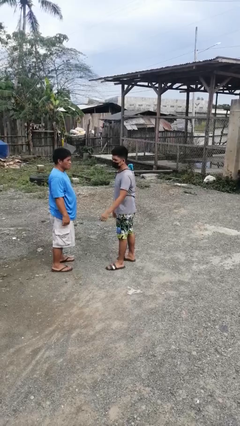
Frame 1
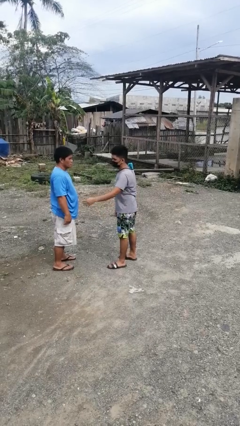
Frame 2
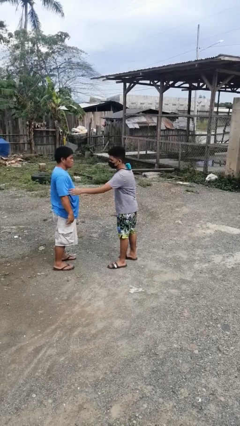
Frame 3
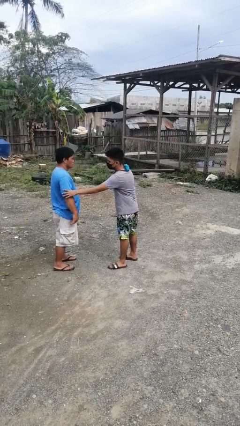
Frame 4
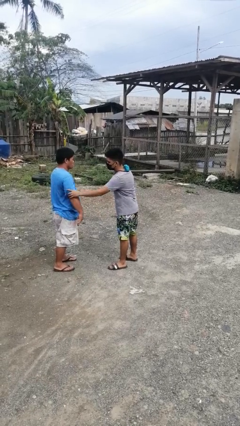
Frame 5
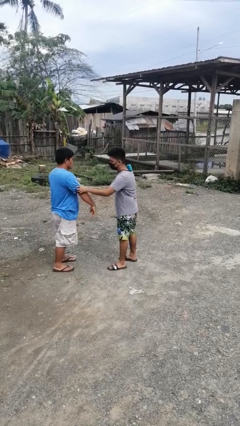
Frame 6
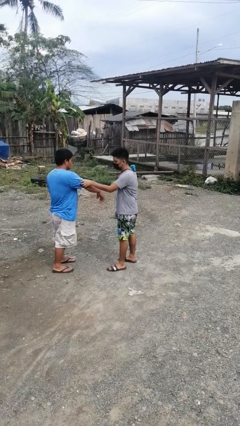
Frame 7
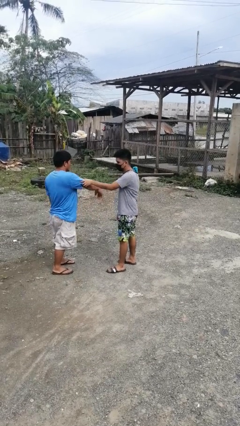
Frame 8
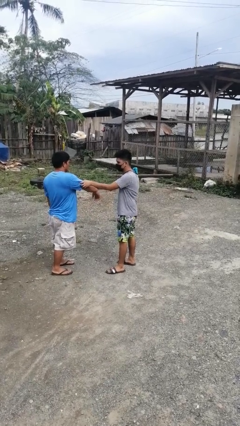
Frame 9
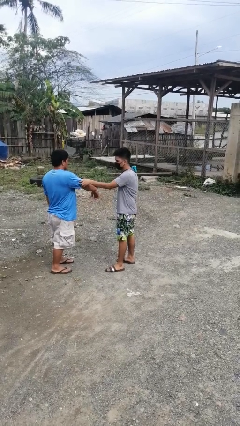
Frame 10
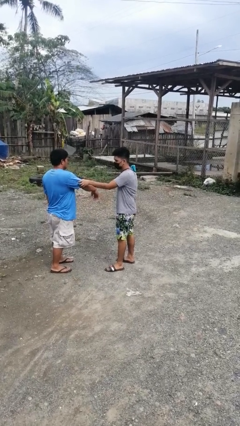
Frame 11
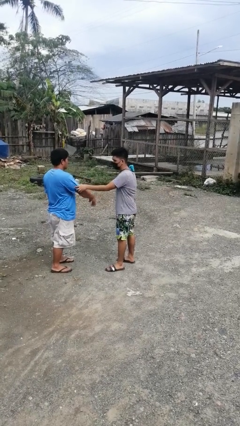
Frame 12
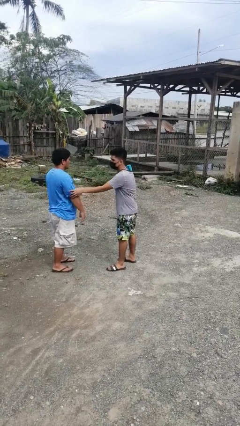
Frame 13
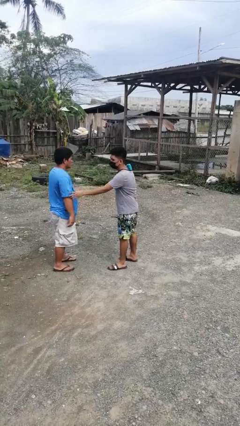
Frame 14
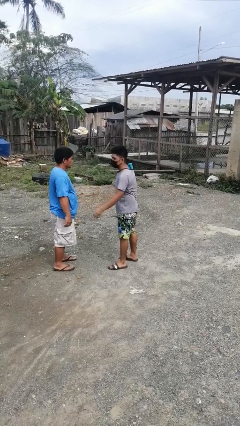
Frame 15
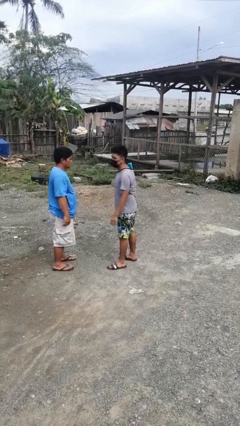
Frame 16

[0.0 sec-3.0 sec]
person grabs person by bicep

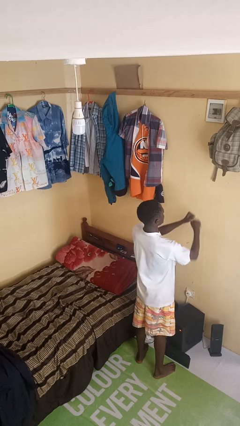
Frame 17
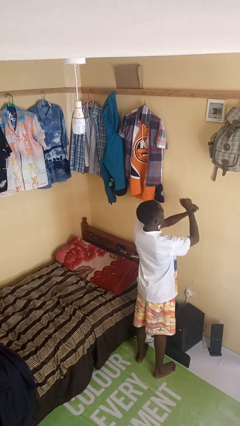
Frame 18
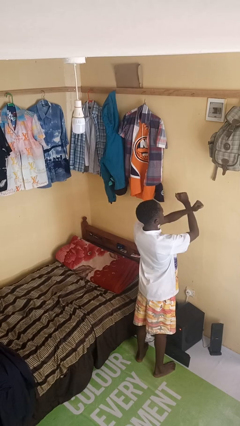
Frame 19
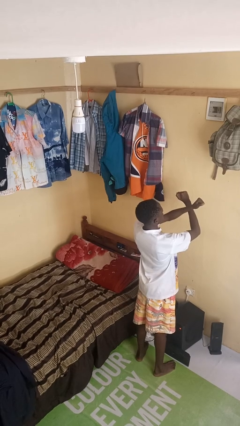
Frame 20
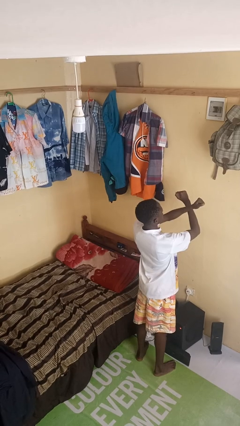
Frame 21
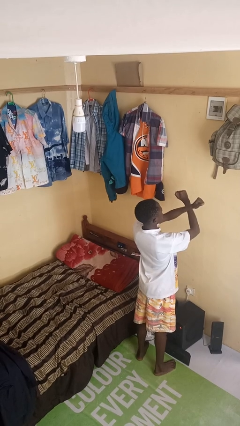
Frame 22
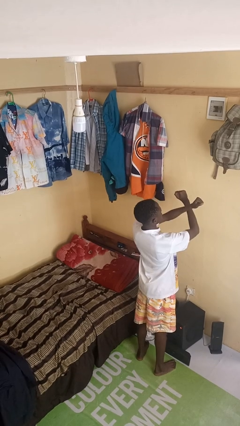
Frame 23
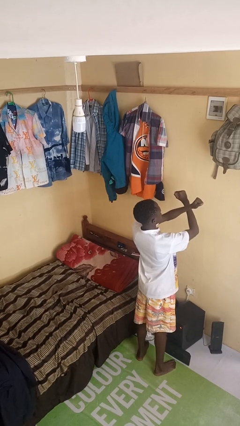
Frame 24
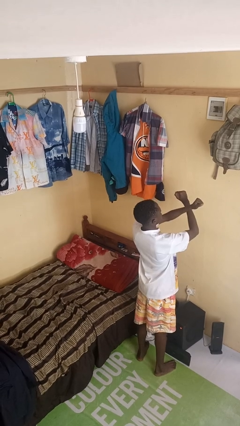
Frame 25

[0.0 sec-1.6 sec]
person gestures arms x

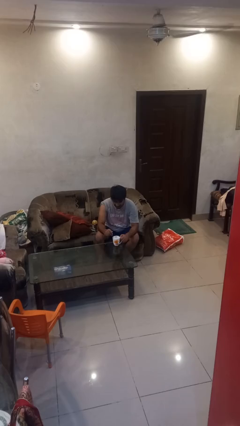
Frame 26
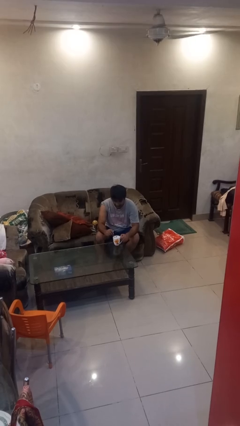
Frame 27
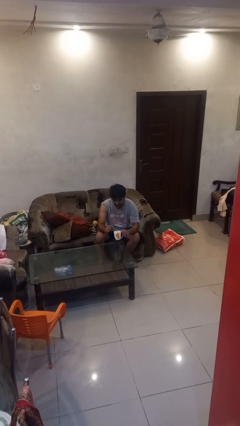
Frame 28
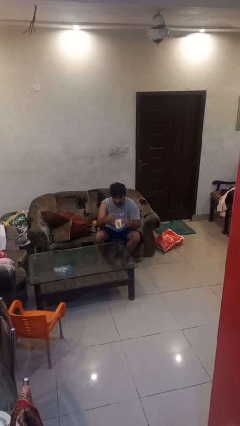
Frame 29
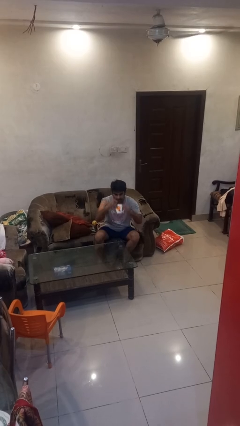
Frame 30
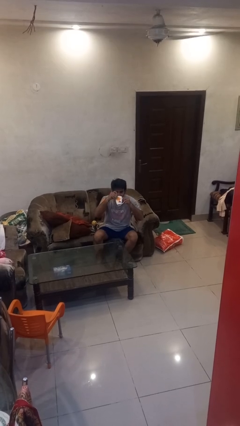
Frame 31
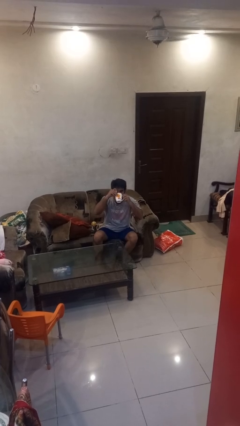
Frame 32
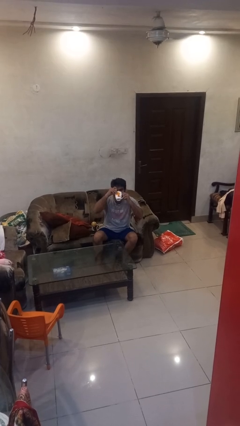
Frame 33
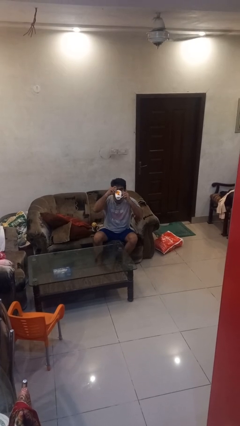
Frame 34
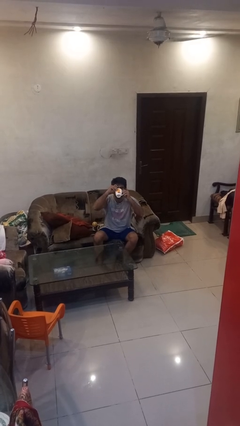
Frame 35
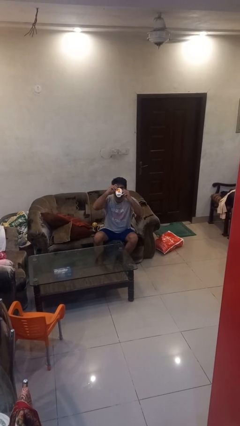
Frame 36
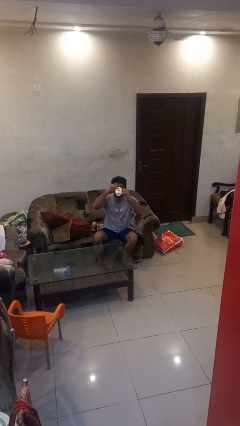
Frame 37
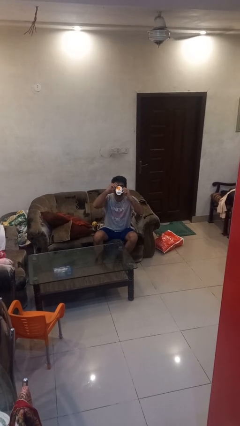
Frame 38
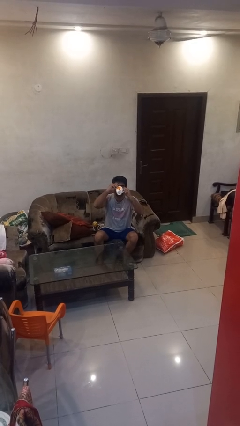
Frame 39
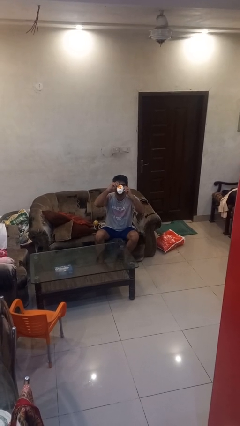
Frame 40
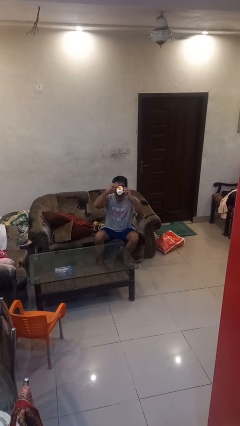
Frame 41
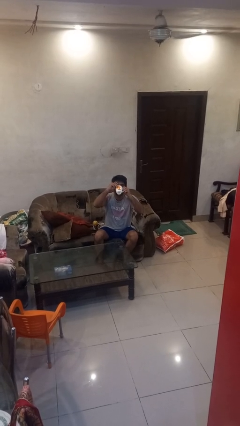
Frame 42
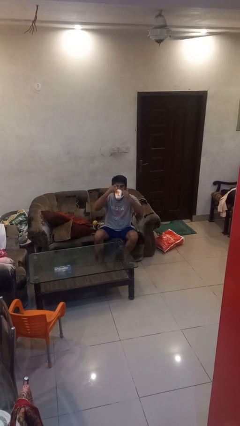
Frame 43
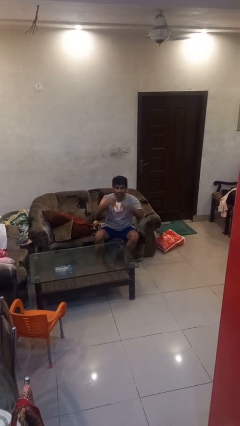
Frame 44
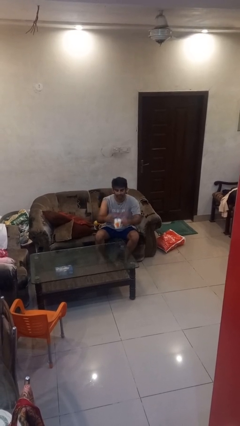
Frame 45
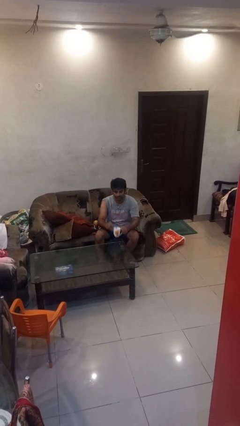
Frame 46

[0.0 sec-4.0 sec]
person drinks from mug

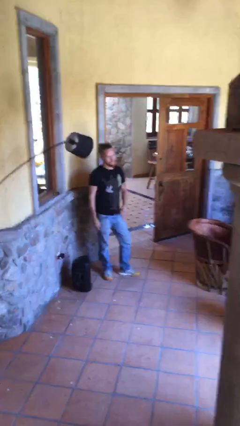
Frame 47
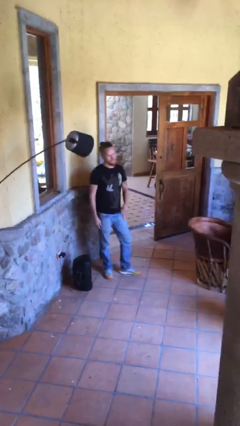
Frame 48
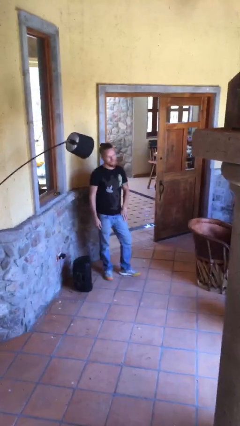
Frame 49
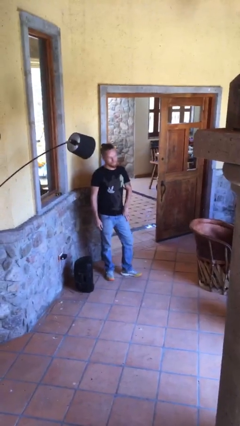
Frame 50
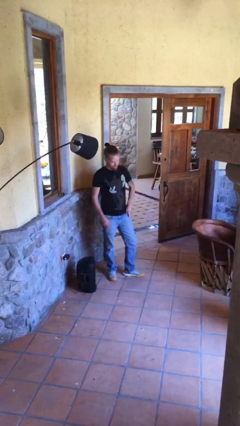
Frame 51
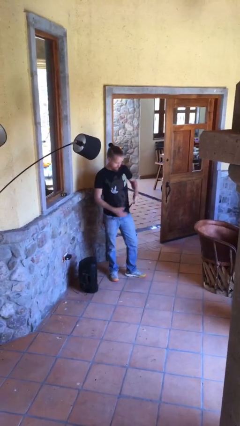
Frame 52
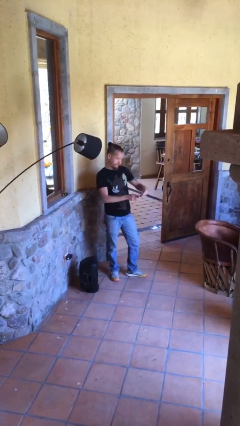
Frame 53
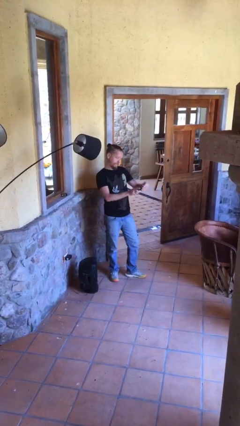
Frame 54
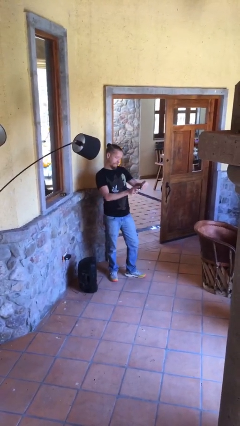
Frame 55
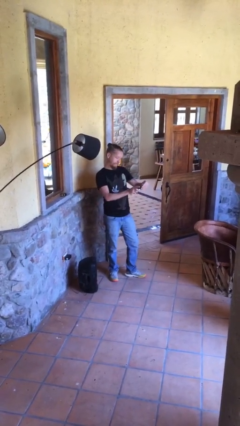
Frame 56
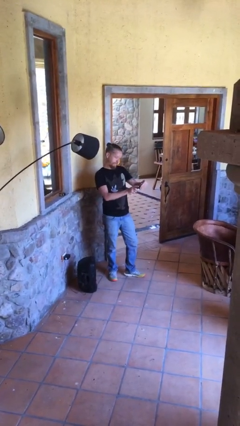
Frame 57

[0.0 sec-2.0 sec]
person takes phone from pocket

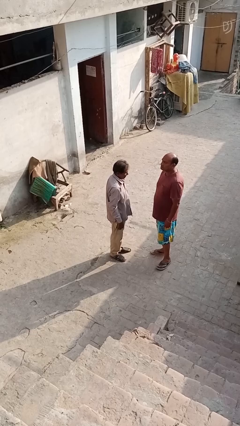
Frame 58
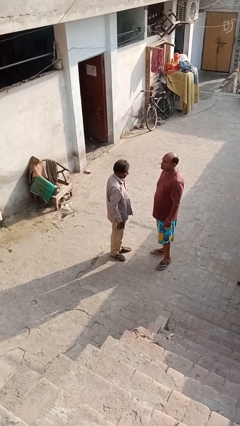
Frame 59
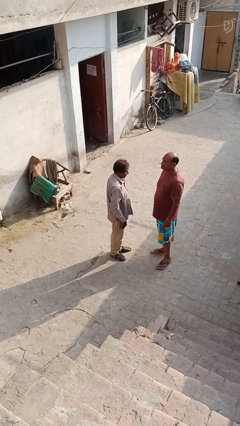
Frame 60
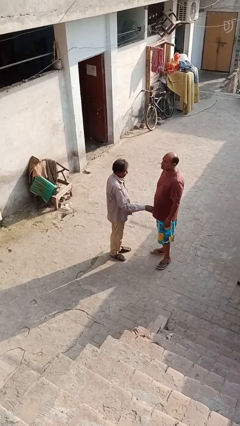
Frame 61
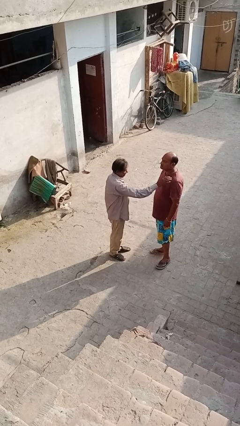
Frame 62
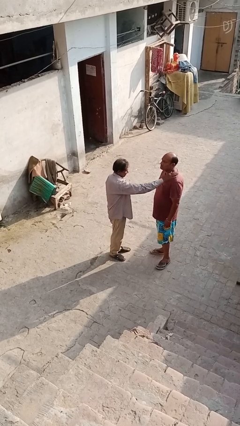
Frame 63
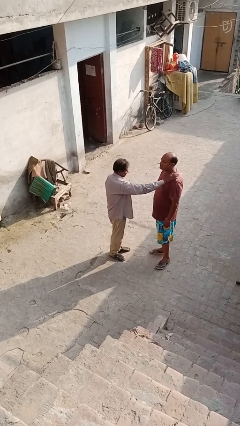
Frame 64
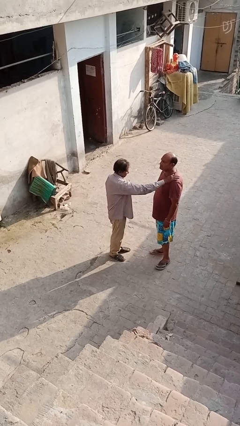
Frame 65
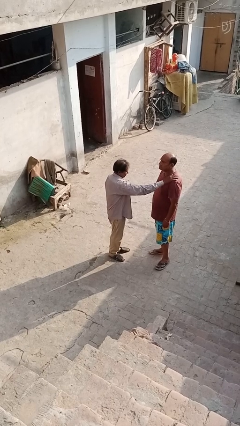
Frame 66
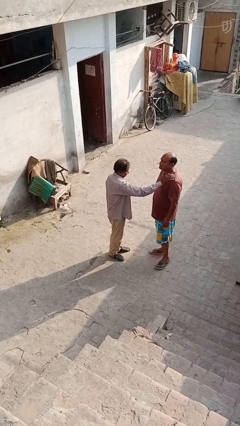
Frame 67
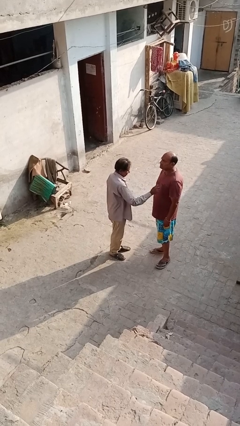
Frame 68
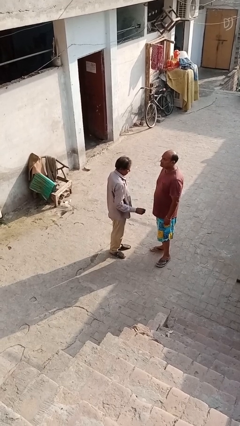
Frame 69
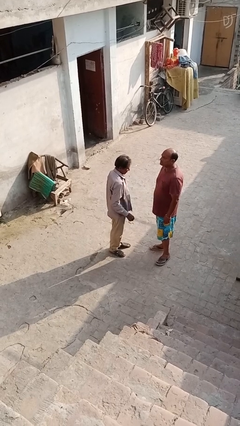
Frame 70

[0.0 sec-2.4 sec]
person pounds shoulders of person

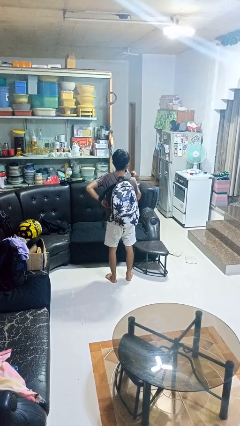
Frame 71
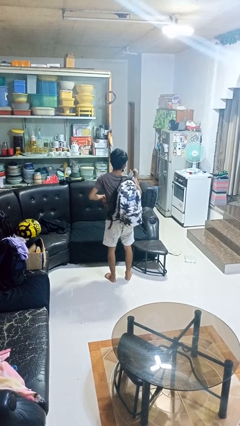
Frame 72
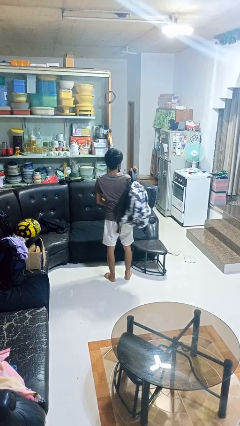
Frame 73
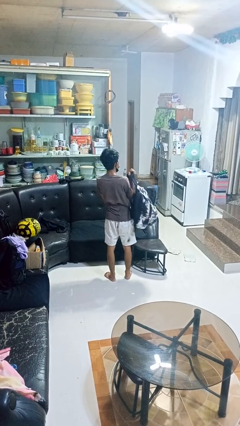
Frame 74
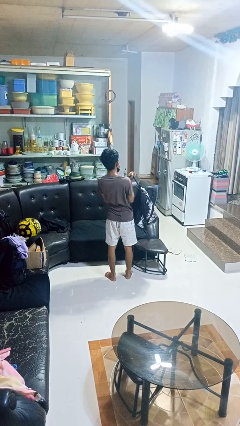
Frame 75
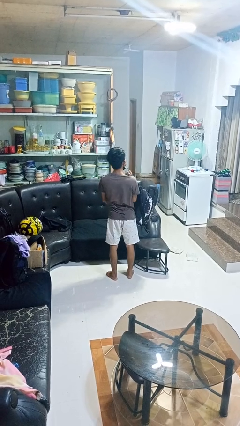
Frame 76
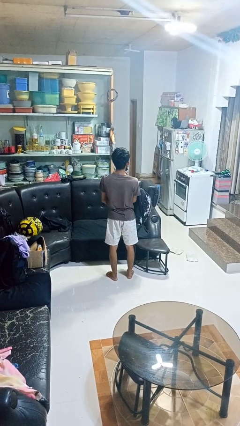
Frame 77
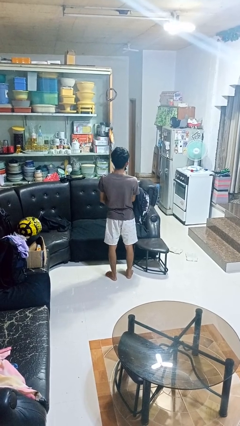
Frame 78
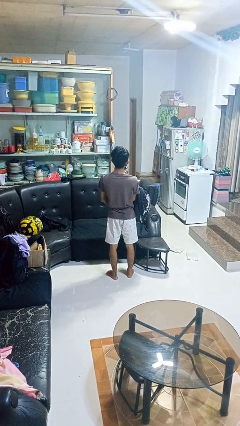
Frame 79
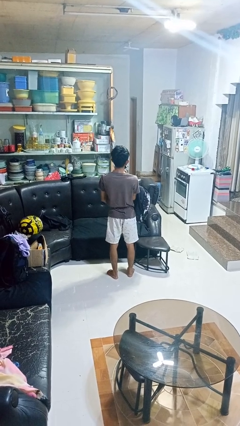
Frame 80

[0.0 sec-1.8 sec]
person takes off backpack

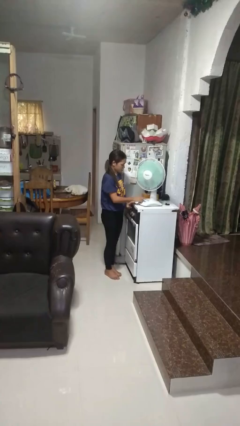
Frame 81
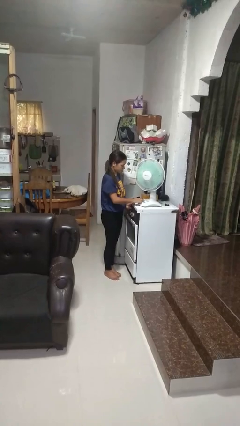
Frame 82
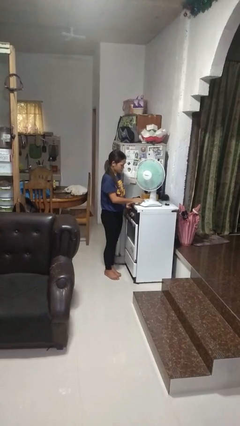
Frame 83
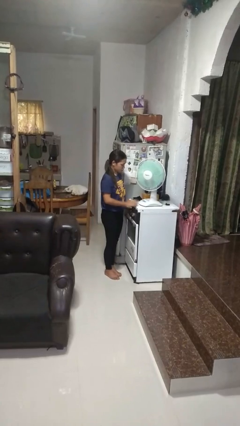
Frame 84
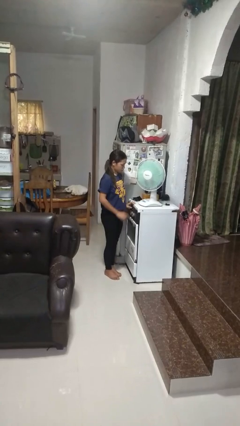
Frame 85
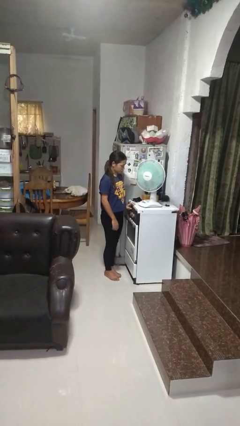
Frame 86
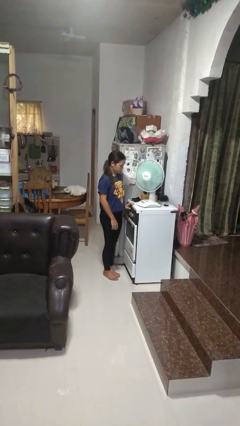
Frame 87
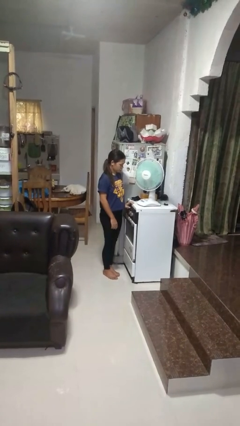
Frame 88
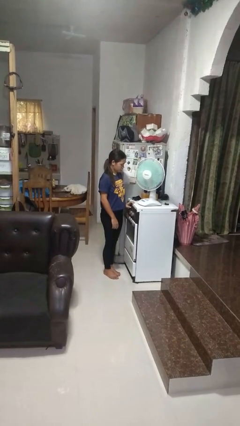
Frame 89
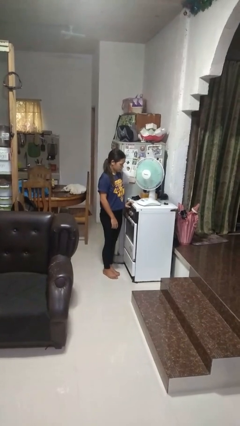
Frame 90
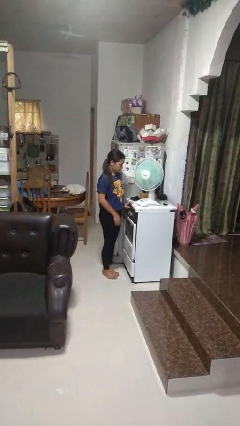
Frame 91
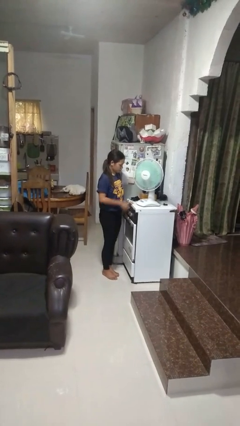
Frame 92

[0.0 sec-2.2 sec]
person turns on fan
